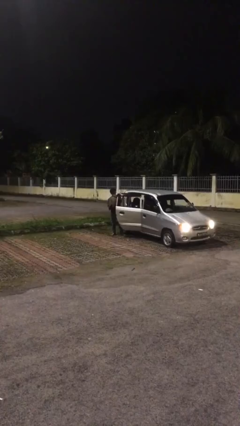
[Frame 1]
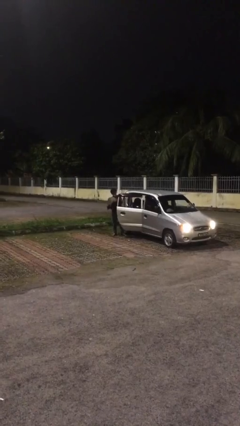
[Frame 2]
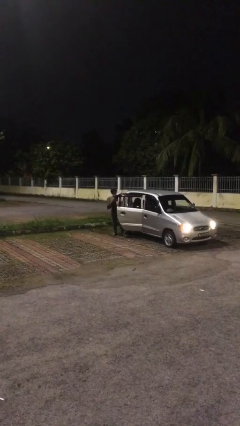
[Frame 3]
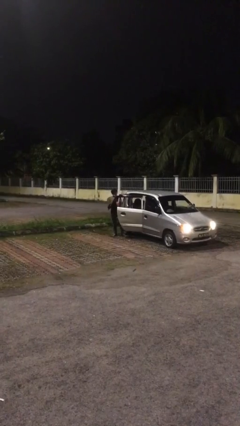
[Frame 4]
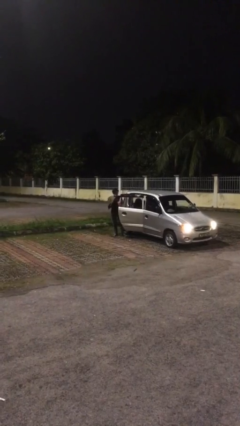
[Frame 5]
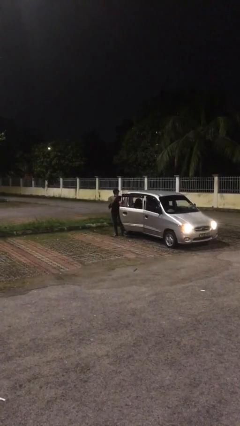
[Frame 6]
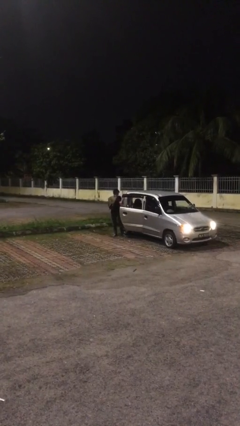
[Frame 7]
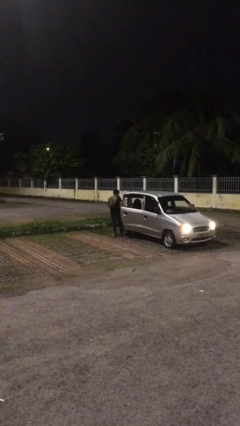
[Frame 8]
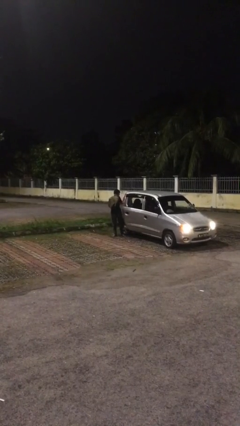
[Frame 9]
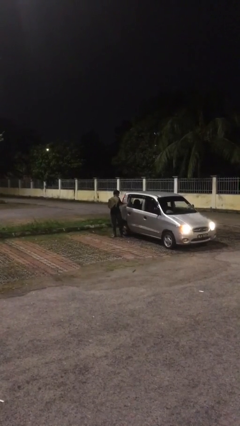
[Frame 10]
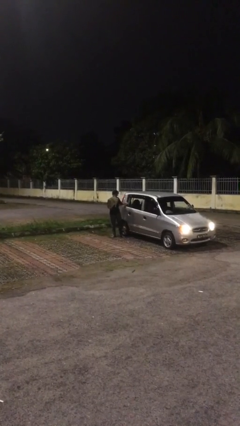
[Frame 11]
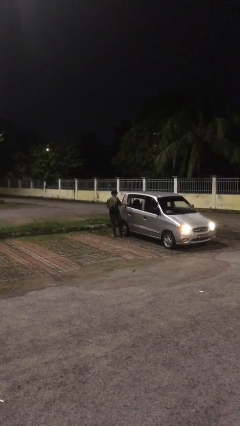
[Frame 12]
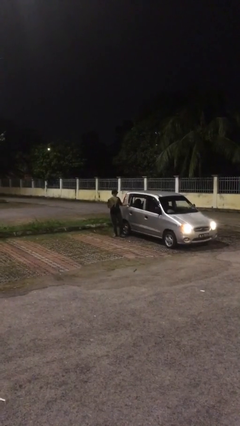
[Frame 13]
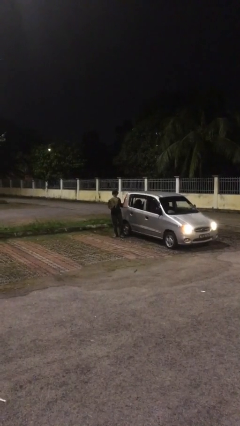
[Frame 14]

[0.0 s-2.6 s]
person closes car door

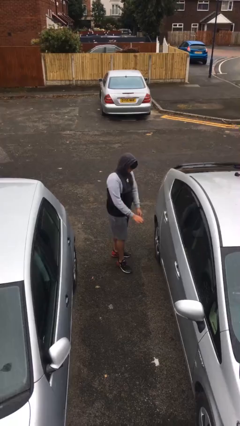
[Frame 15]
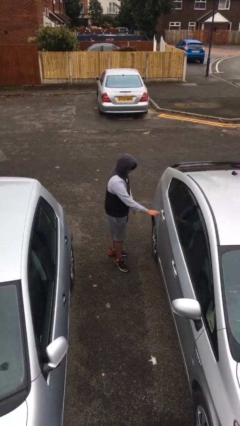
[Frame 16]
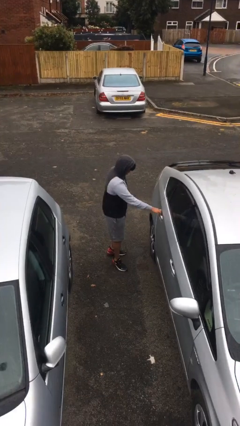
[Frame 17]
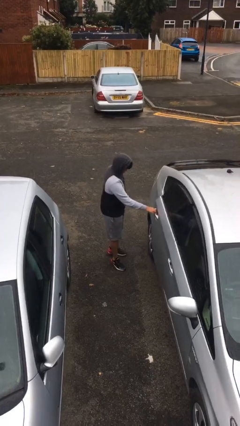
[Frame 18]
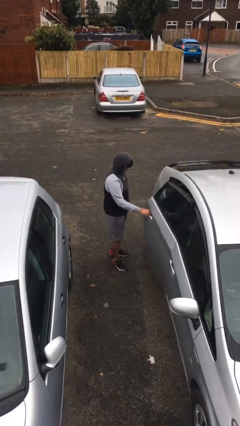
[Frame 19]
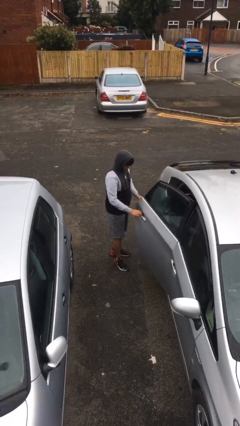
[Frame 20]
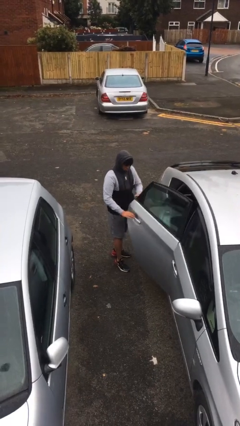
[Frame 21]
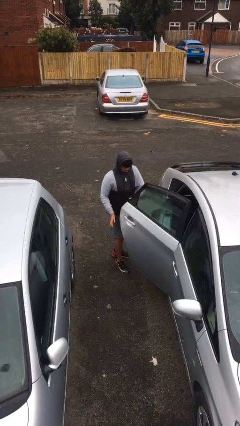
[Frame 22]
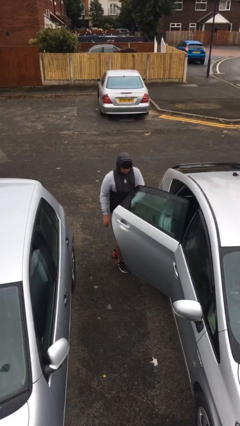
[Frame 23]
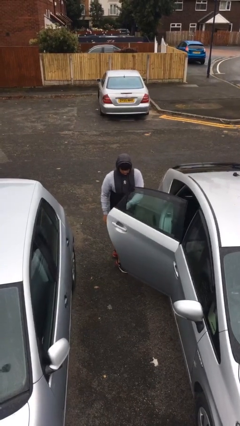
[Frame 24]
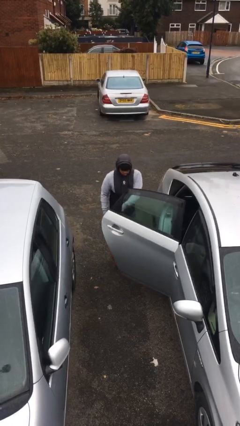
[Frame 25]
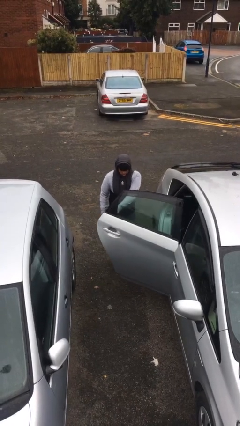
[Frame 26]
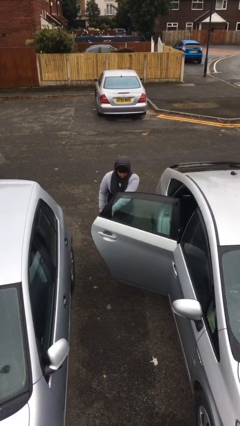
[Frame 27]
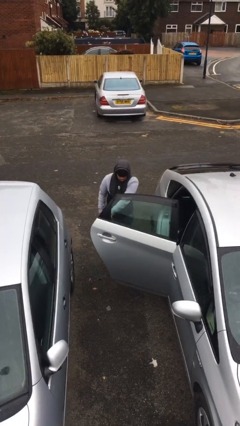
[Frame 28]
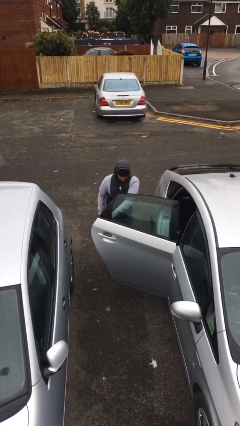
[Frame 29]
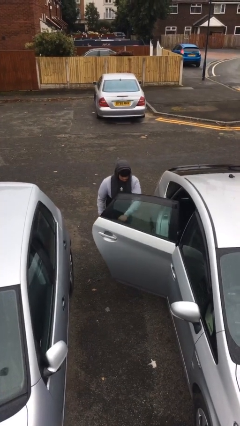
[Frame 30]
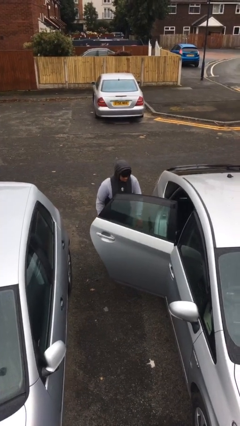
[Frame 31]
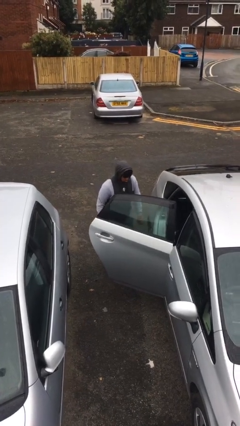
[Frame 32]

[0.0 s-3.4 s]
person opens car door

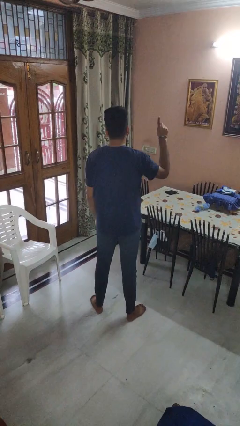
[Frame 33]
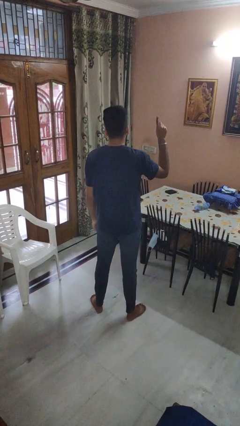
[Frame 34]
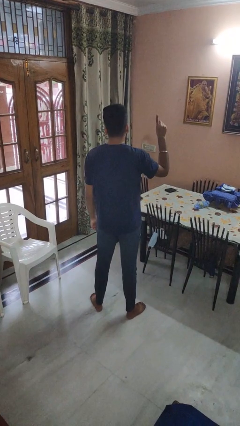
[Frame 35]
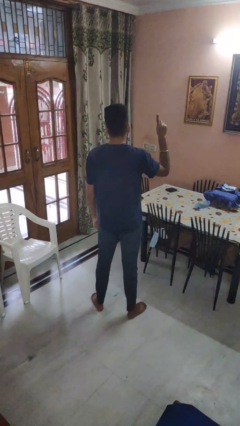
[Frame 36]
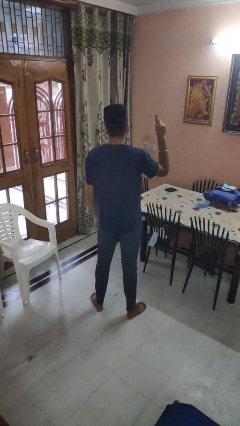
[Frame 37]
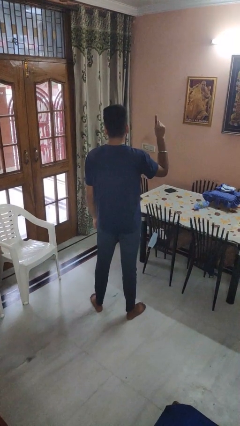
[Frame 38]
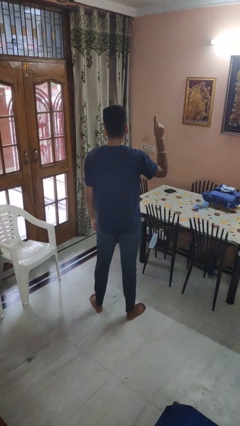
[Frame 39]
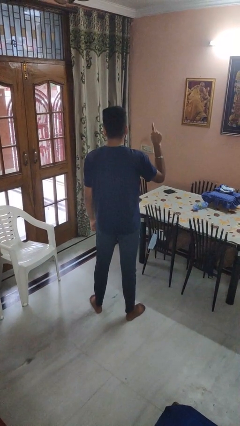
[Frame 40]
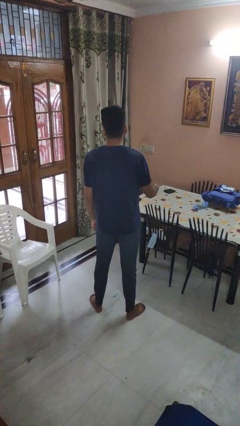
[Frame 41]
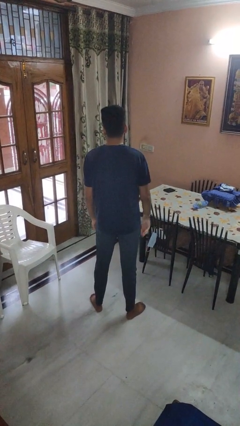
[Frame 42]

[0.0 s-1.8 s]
person gestures number one

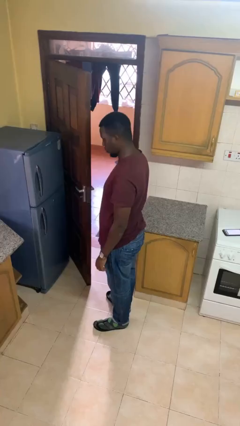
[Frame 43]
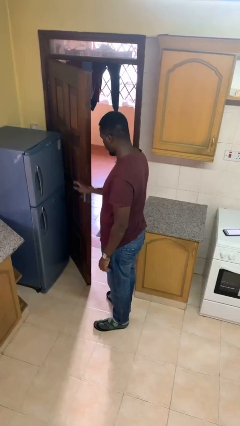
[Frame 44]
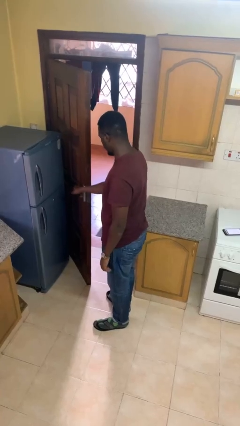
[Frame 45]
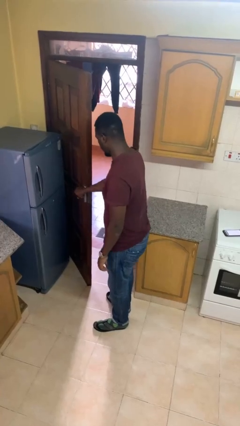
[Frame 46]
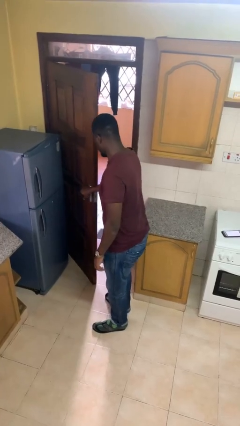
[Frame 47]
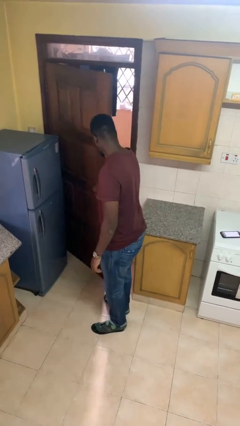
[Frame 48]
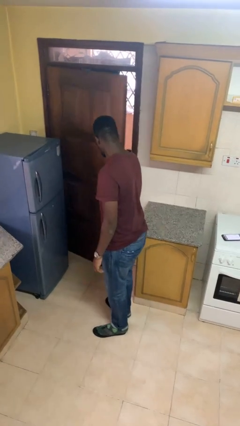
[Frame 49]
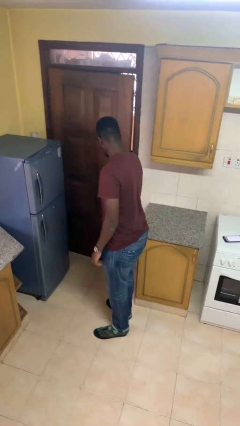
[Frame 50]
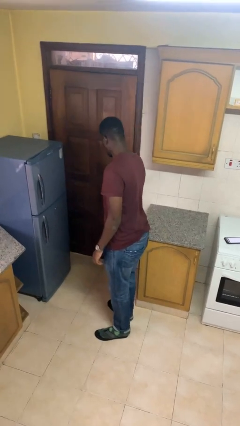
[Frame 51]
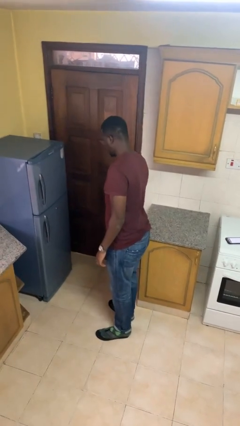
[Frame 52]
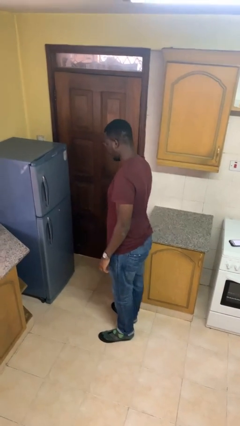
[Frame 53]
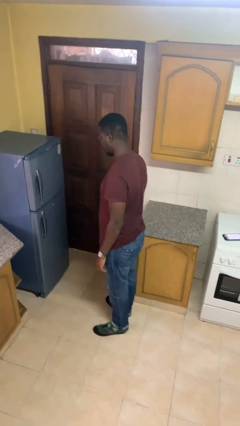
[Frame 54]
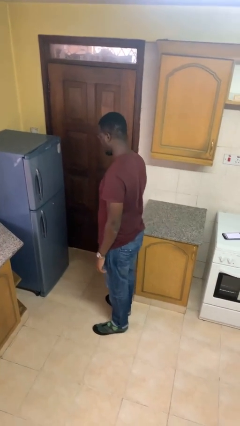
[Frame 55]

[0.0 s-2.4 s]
person closes facility door

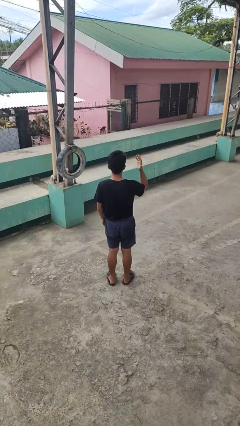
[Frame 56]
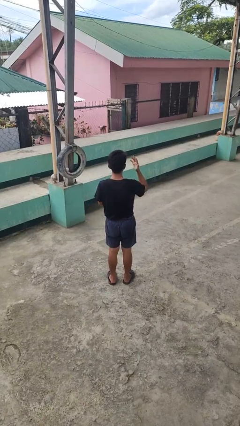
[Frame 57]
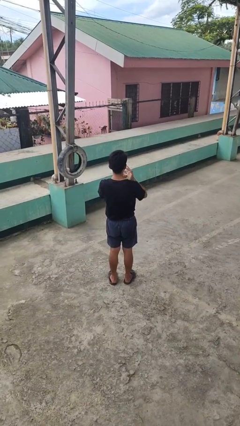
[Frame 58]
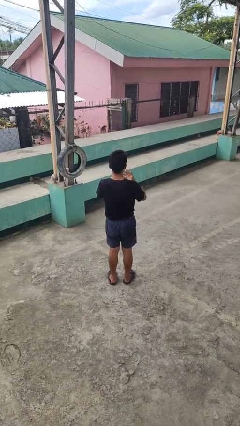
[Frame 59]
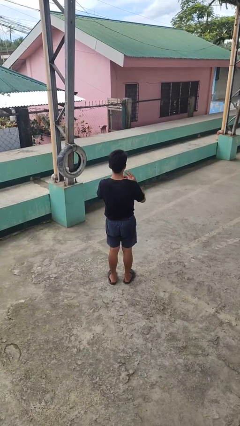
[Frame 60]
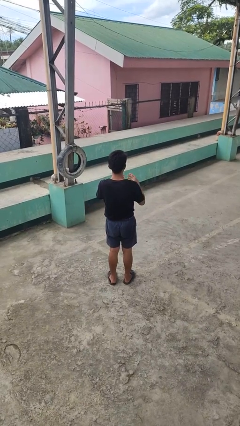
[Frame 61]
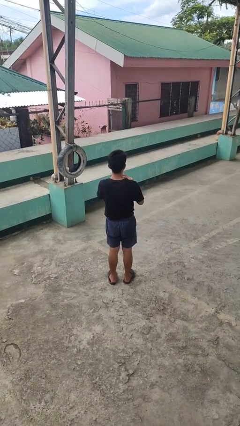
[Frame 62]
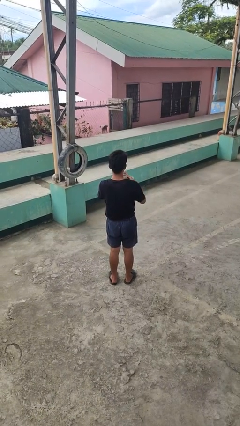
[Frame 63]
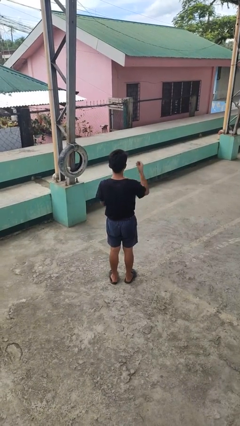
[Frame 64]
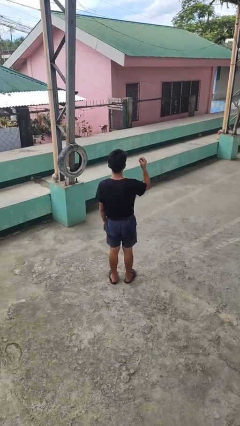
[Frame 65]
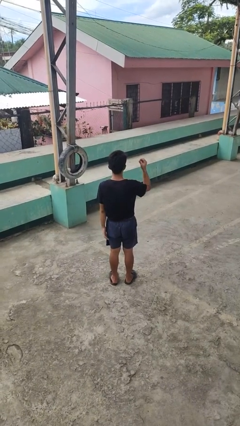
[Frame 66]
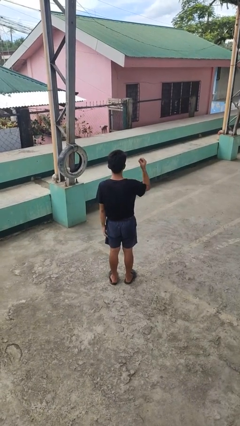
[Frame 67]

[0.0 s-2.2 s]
person takes off ring

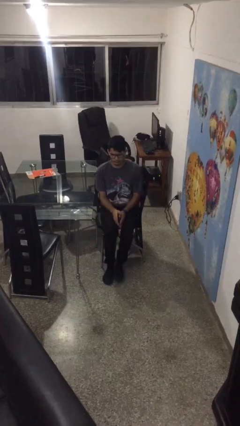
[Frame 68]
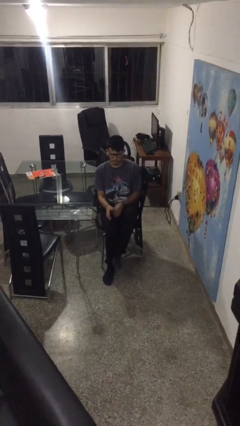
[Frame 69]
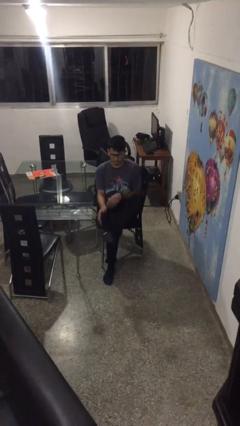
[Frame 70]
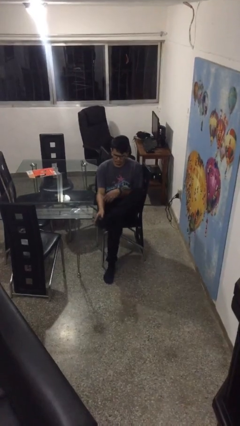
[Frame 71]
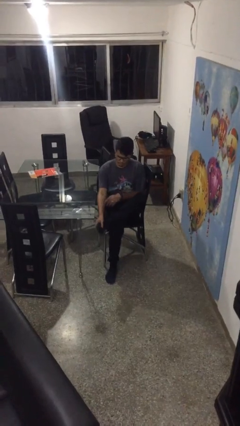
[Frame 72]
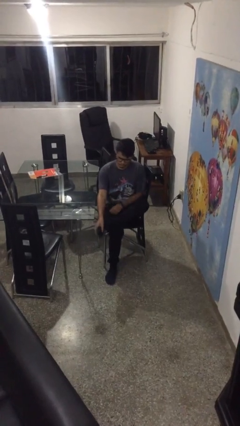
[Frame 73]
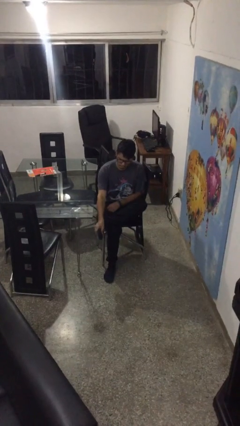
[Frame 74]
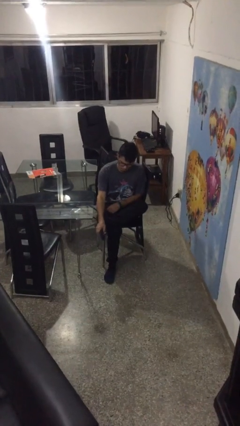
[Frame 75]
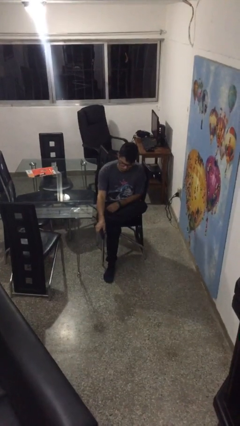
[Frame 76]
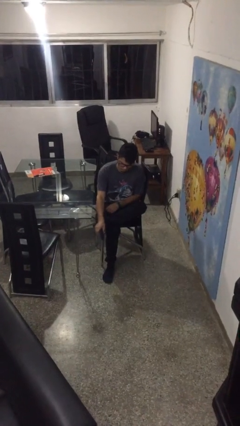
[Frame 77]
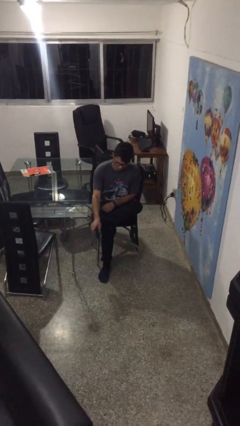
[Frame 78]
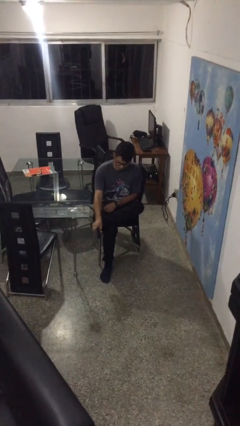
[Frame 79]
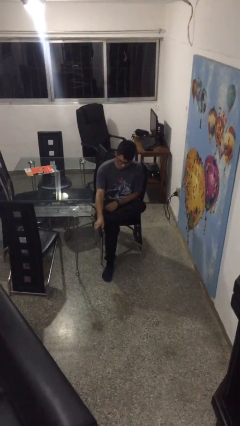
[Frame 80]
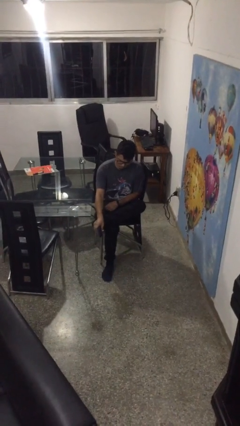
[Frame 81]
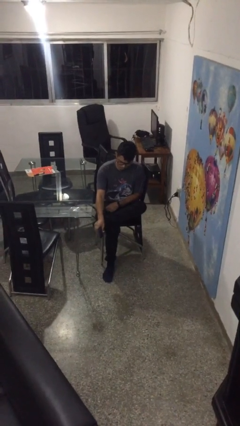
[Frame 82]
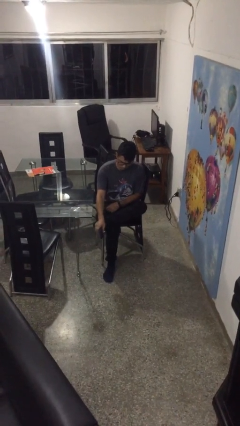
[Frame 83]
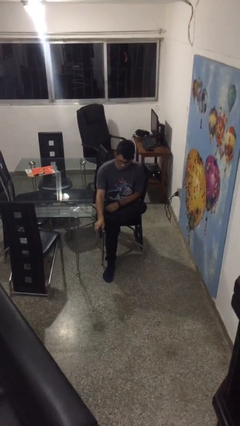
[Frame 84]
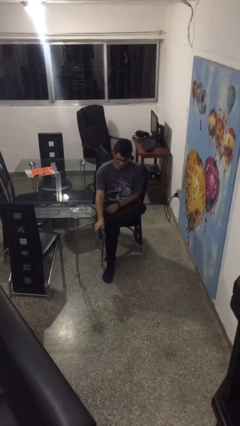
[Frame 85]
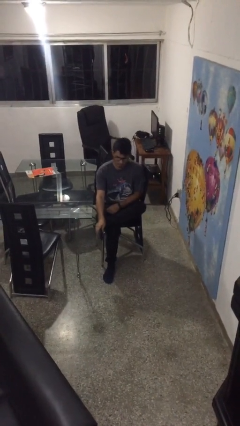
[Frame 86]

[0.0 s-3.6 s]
person rubs foot

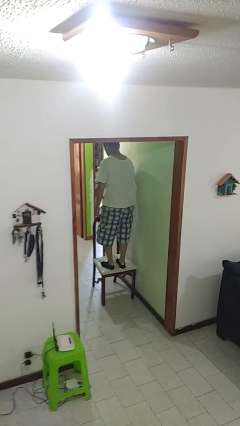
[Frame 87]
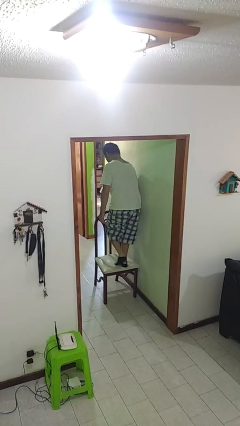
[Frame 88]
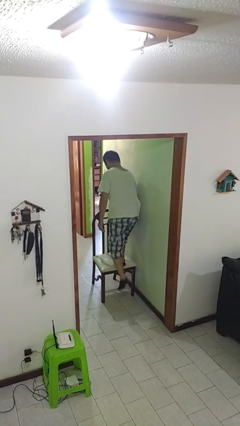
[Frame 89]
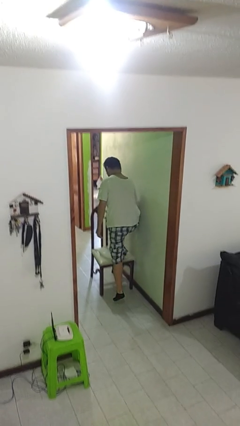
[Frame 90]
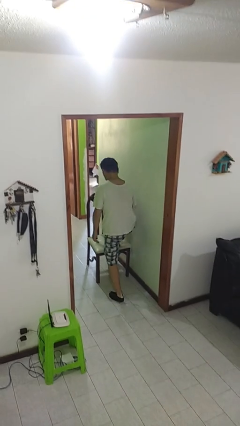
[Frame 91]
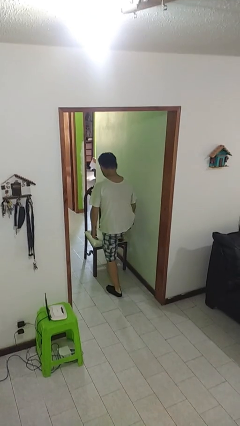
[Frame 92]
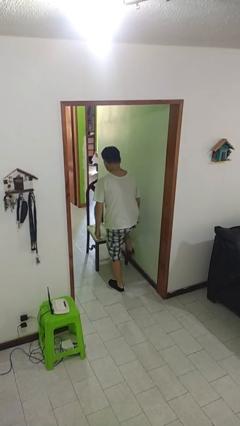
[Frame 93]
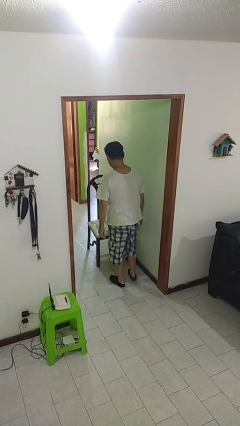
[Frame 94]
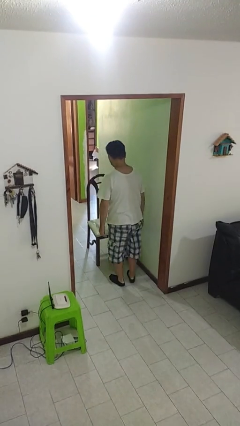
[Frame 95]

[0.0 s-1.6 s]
person climbs off chair
